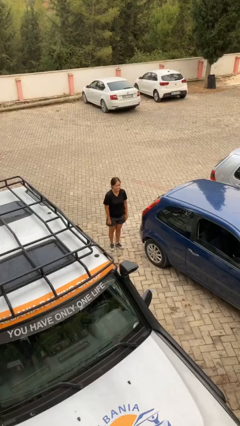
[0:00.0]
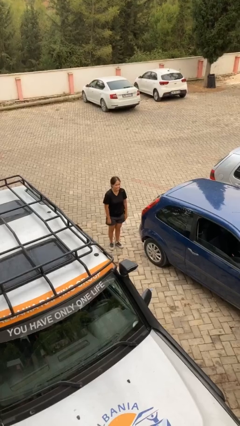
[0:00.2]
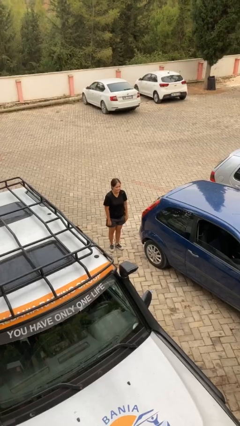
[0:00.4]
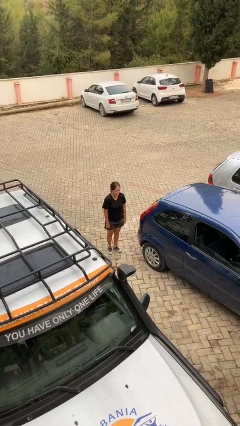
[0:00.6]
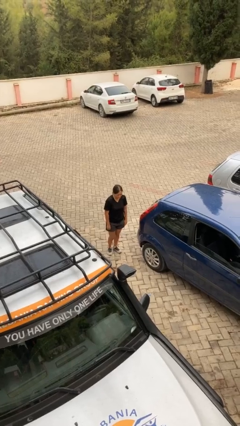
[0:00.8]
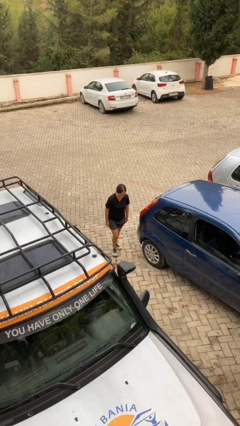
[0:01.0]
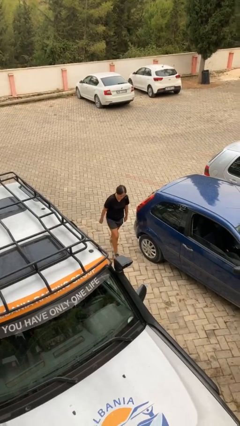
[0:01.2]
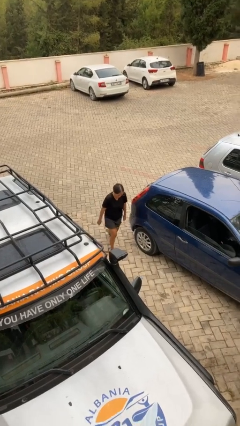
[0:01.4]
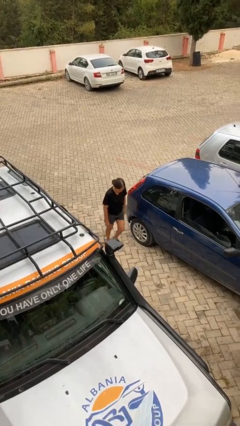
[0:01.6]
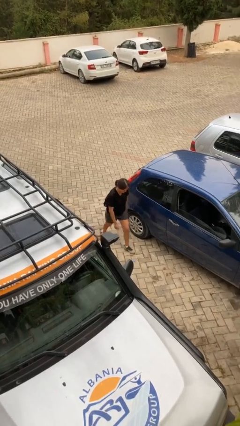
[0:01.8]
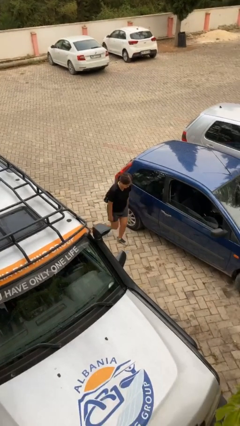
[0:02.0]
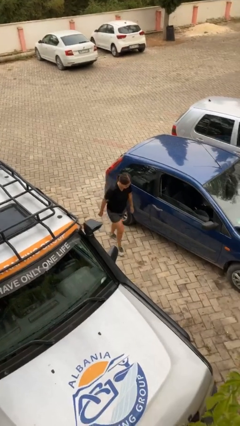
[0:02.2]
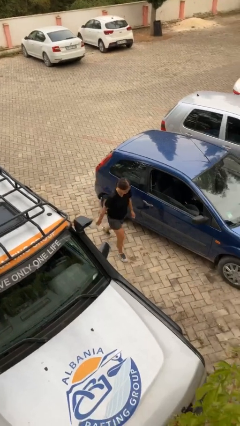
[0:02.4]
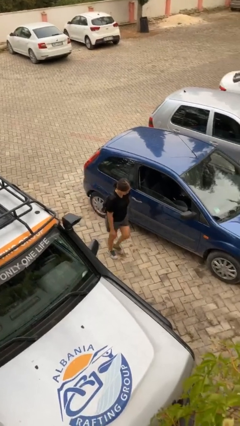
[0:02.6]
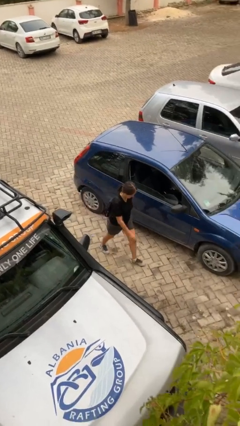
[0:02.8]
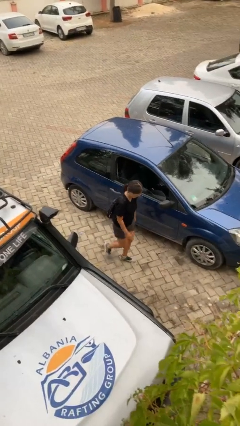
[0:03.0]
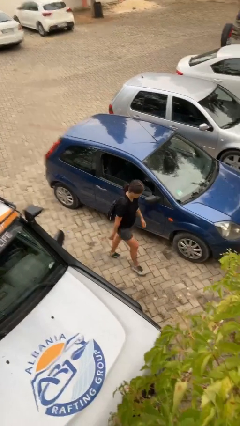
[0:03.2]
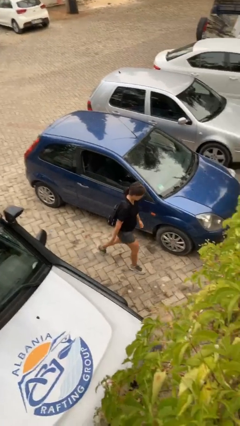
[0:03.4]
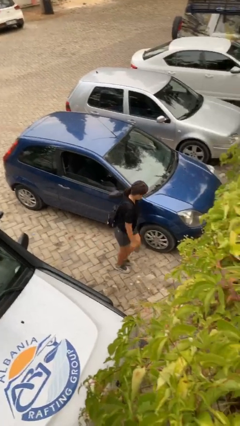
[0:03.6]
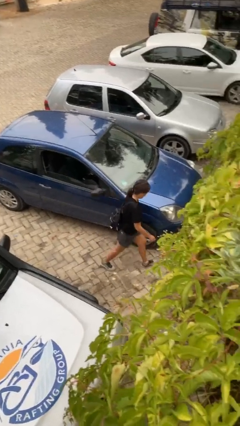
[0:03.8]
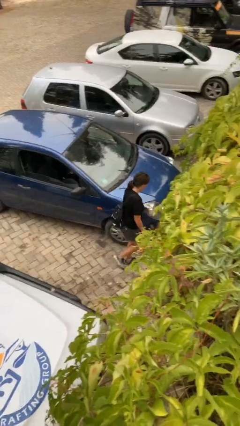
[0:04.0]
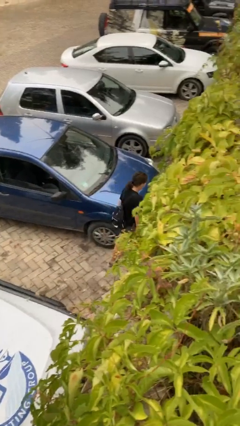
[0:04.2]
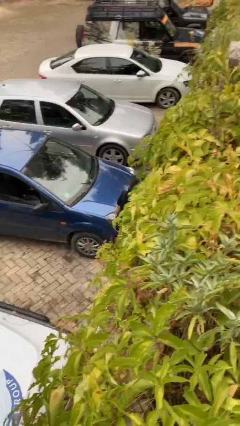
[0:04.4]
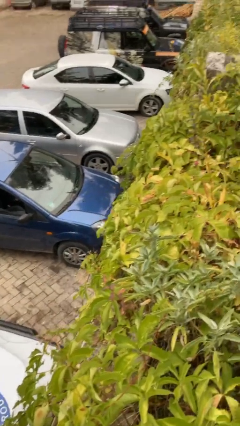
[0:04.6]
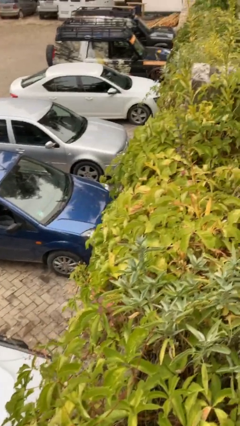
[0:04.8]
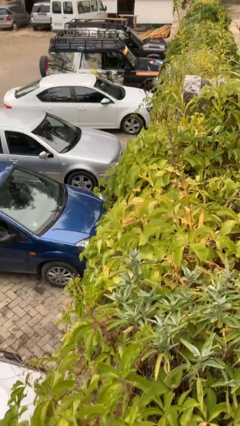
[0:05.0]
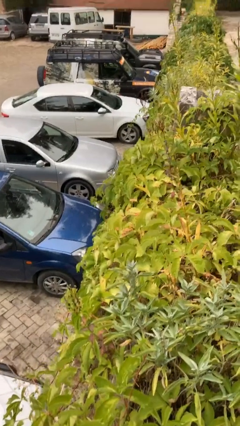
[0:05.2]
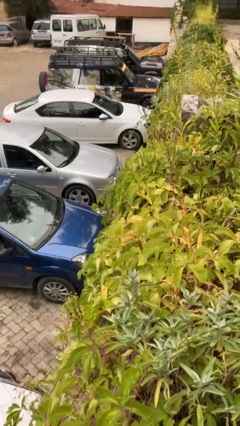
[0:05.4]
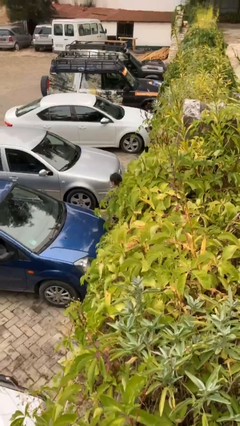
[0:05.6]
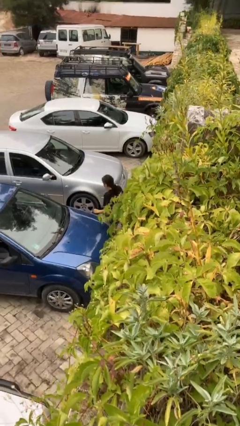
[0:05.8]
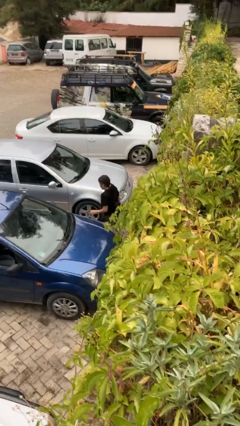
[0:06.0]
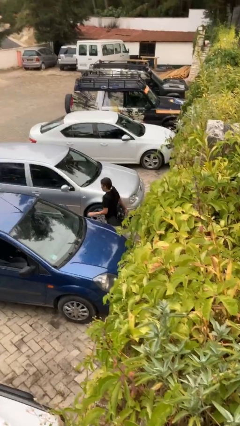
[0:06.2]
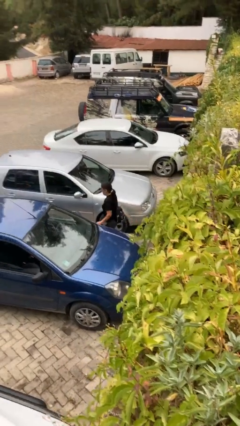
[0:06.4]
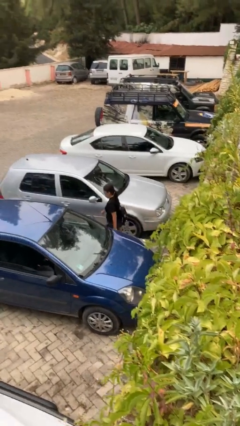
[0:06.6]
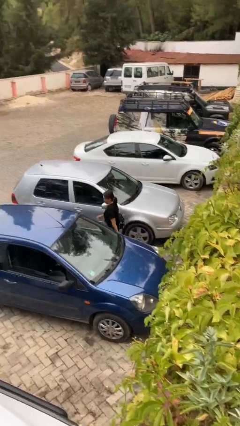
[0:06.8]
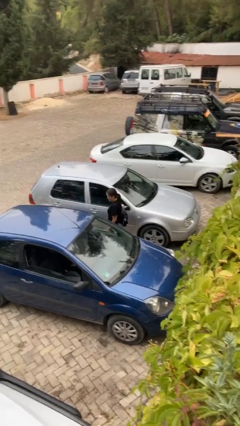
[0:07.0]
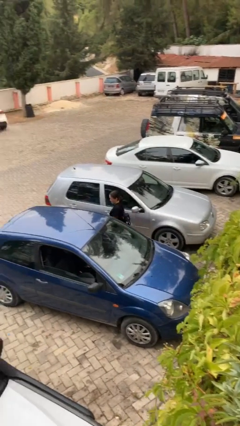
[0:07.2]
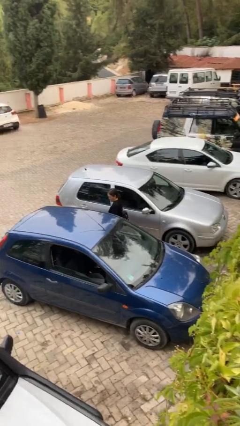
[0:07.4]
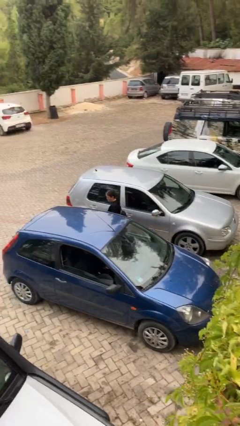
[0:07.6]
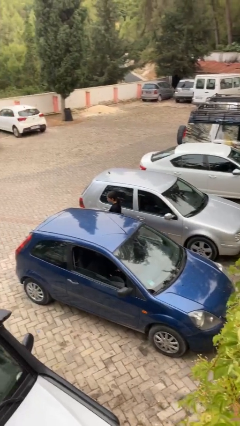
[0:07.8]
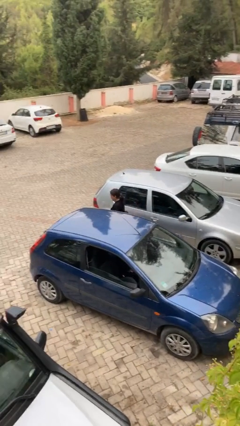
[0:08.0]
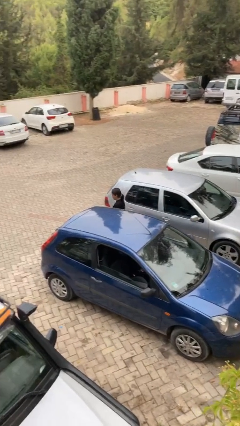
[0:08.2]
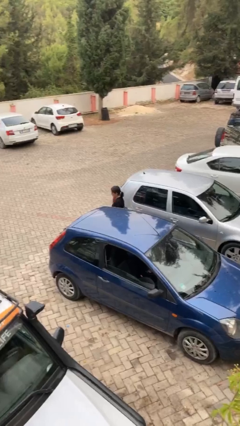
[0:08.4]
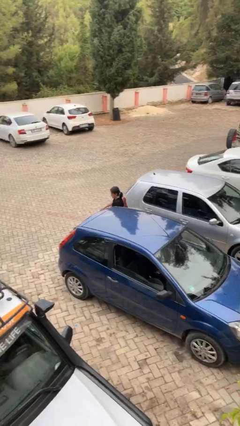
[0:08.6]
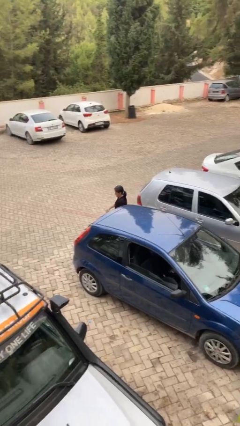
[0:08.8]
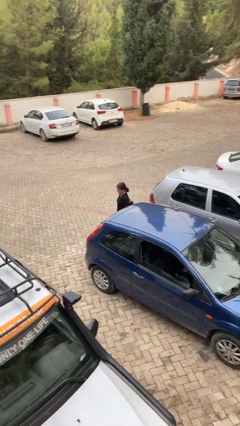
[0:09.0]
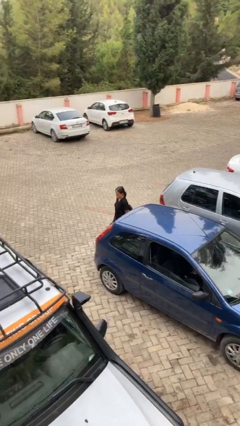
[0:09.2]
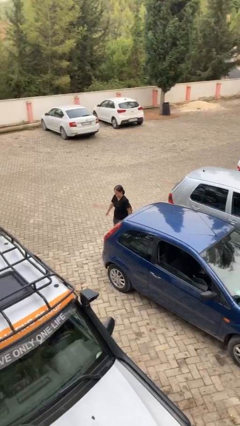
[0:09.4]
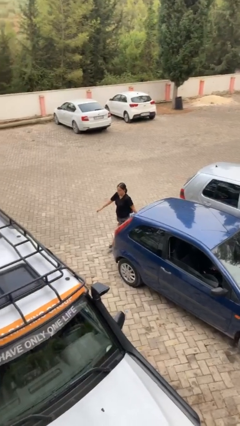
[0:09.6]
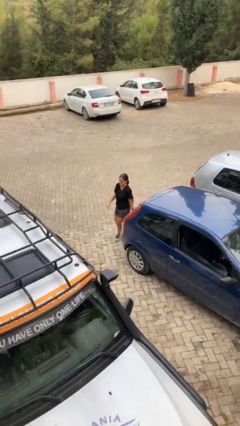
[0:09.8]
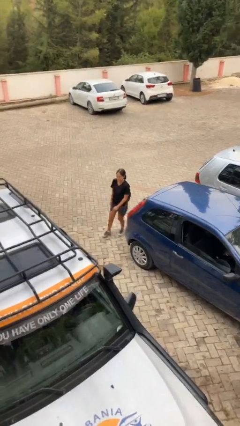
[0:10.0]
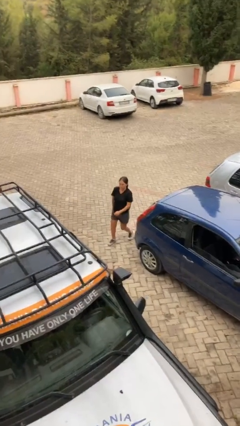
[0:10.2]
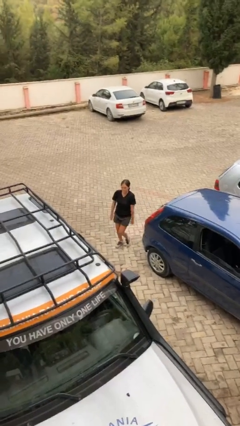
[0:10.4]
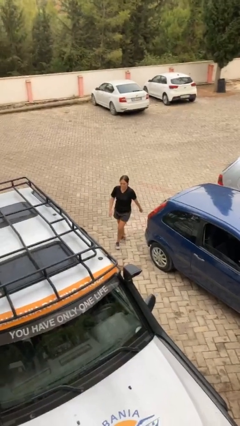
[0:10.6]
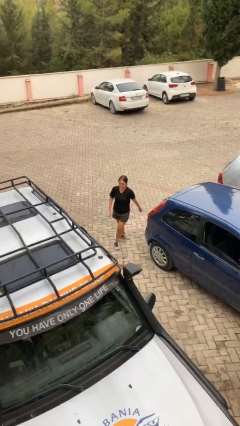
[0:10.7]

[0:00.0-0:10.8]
person walks around car

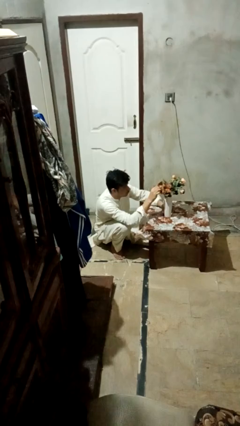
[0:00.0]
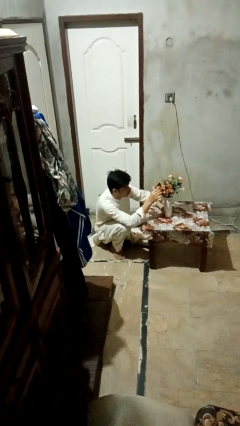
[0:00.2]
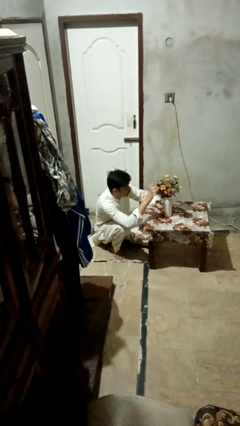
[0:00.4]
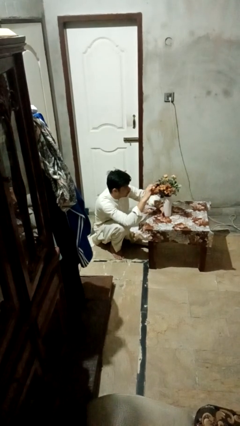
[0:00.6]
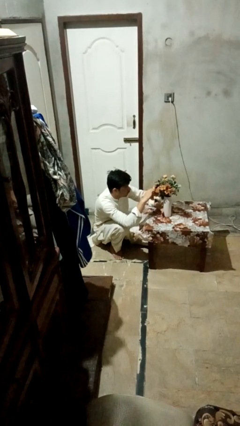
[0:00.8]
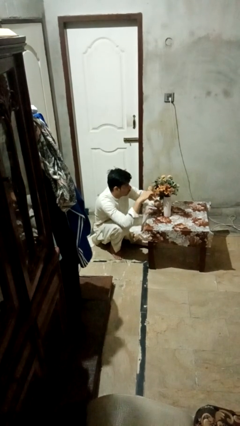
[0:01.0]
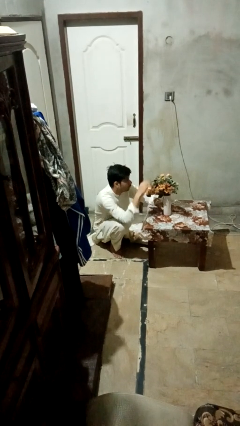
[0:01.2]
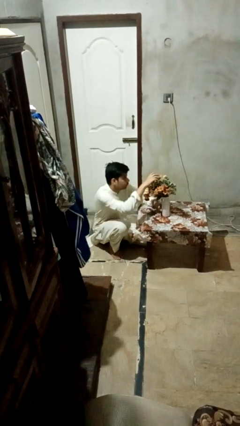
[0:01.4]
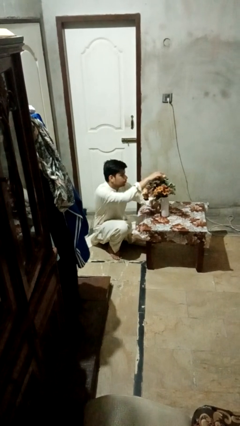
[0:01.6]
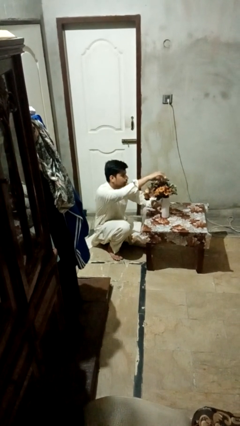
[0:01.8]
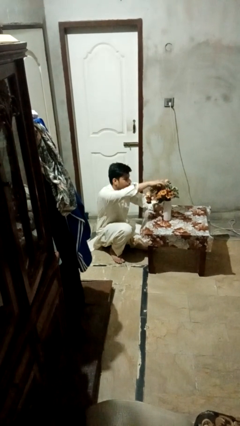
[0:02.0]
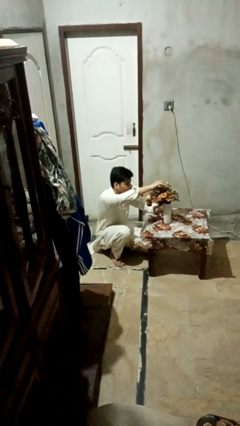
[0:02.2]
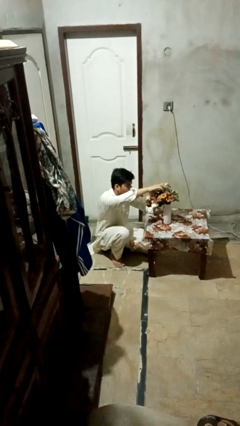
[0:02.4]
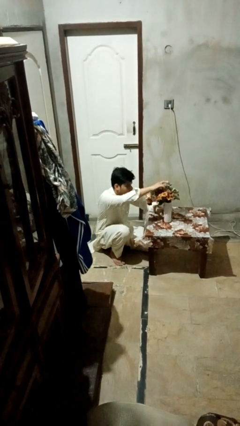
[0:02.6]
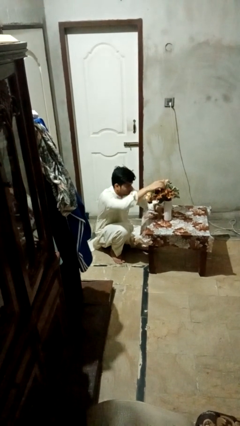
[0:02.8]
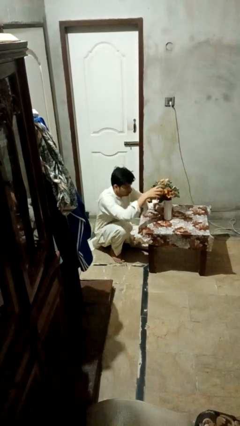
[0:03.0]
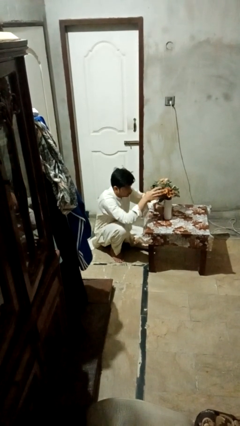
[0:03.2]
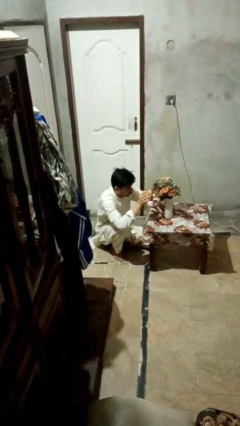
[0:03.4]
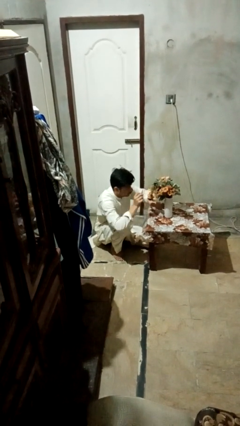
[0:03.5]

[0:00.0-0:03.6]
person arranges flowers in vase

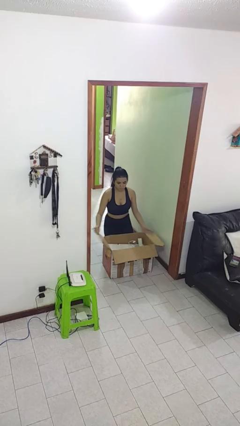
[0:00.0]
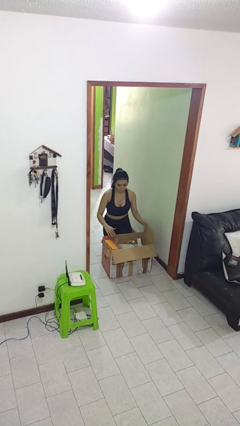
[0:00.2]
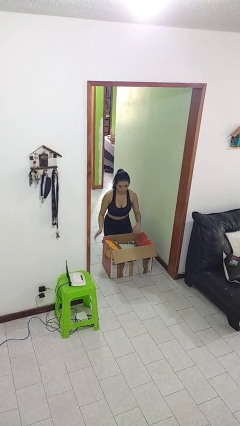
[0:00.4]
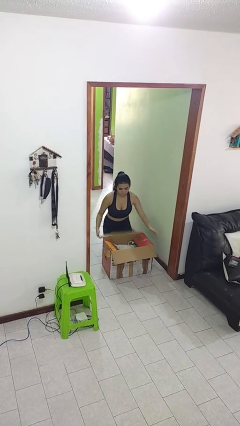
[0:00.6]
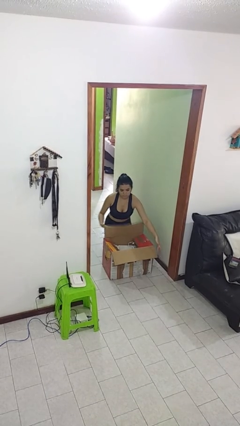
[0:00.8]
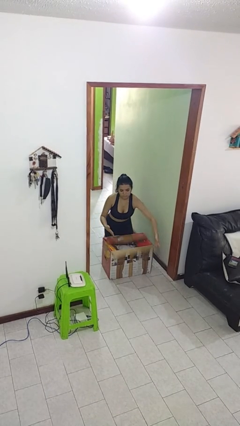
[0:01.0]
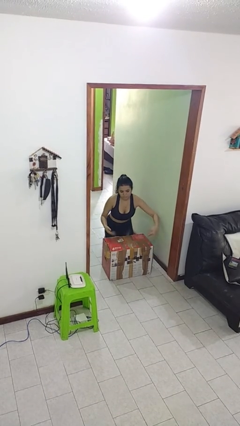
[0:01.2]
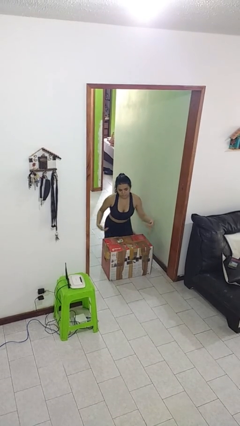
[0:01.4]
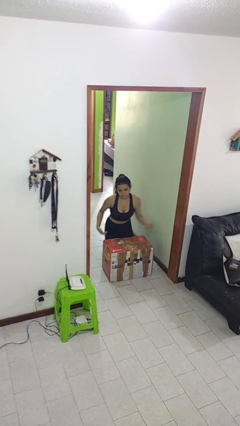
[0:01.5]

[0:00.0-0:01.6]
person closes box

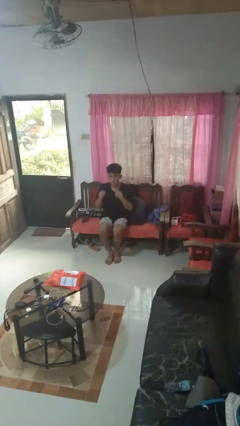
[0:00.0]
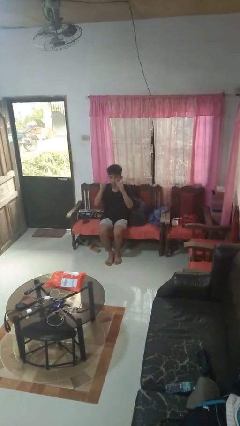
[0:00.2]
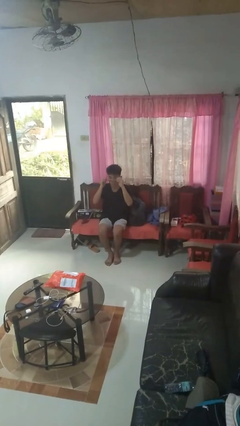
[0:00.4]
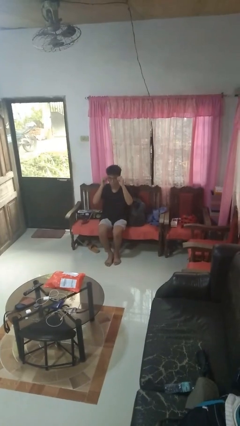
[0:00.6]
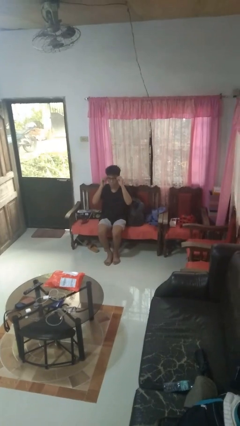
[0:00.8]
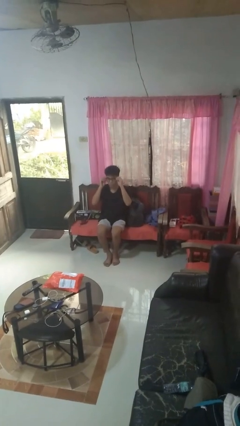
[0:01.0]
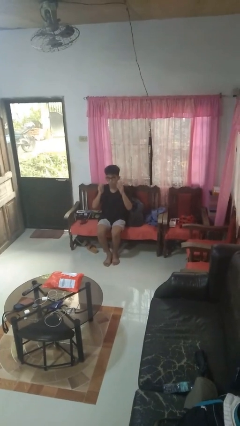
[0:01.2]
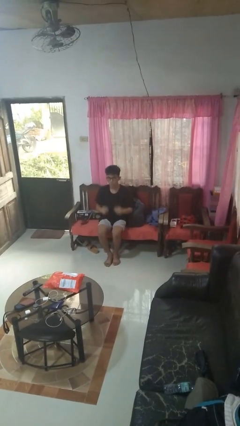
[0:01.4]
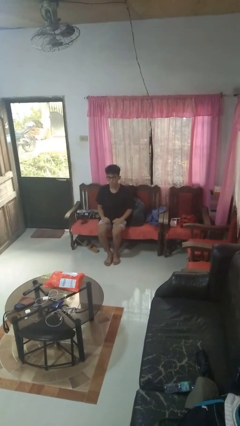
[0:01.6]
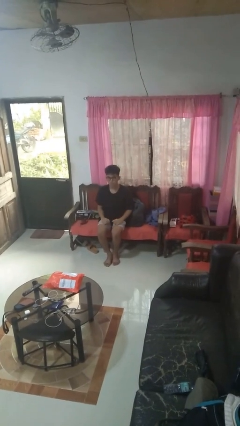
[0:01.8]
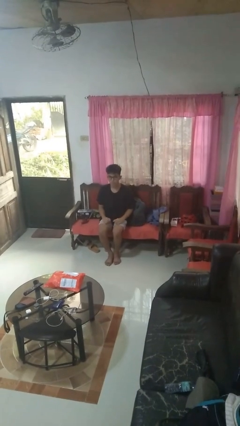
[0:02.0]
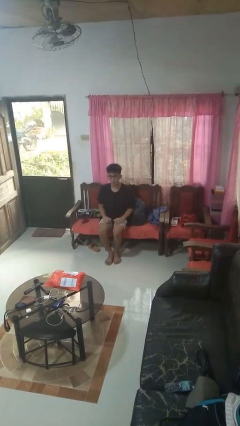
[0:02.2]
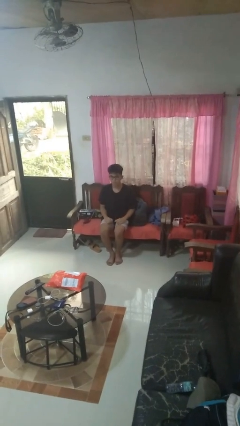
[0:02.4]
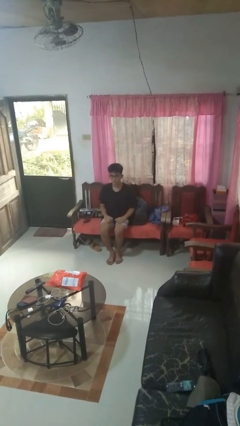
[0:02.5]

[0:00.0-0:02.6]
person puts on glasses
